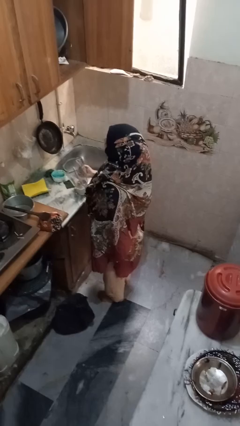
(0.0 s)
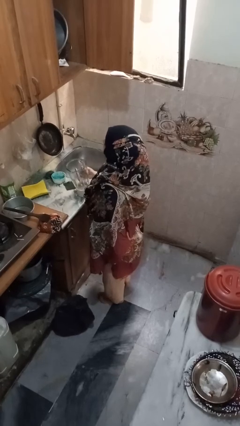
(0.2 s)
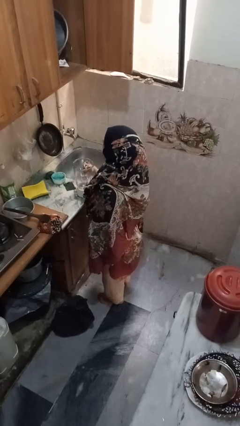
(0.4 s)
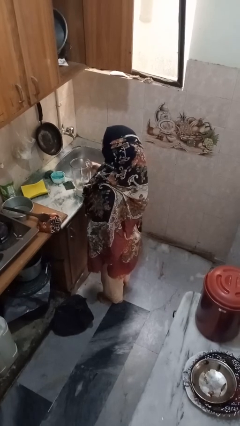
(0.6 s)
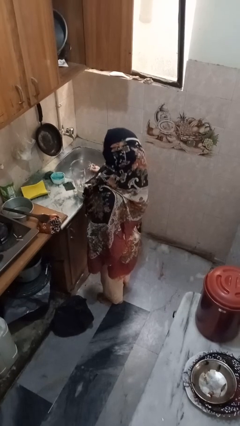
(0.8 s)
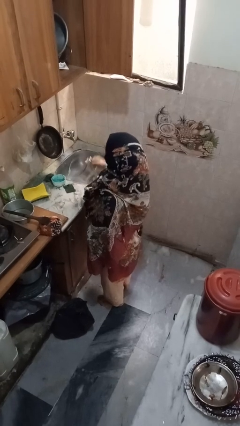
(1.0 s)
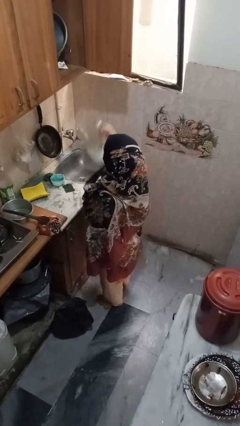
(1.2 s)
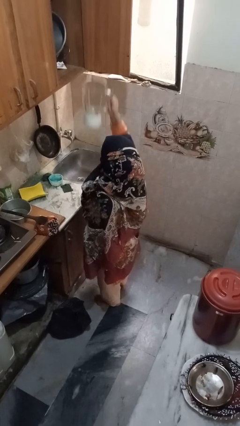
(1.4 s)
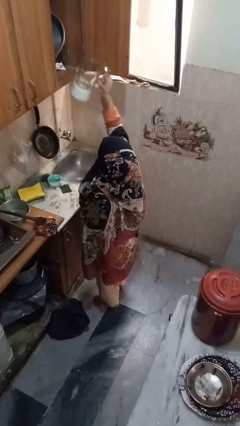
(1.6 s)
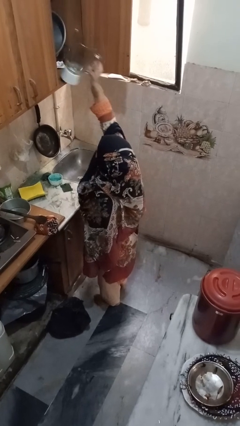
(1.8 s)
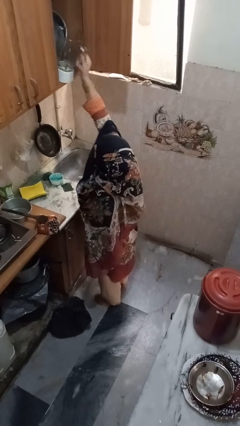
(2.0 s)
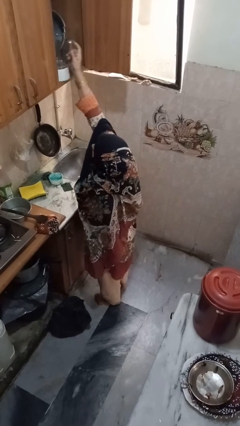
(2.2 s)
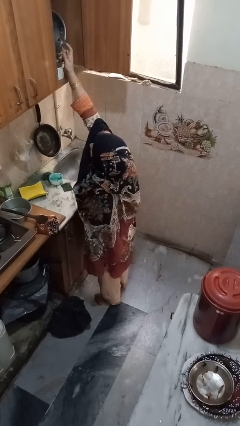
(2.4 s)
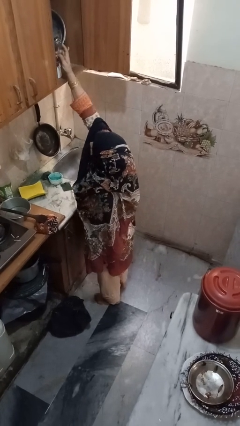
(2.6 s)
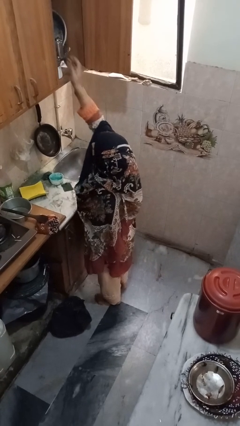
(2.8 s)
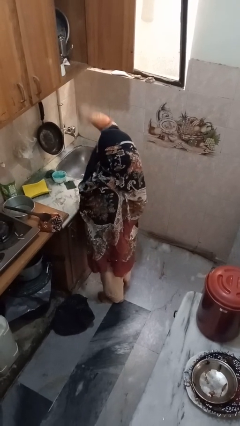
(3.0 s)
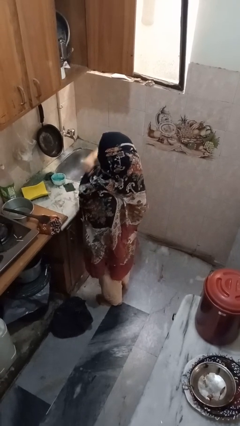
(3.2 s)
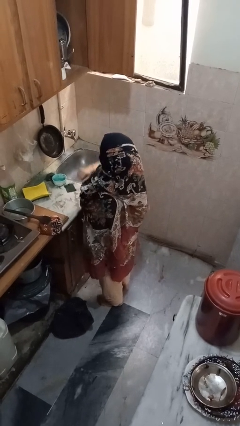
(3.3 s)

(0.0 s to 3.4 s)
person takes object from cabinet

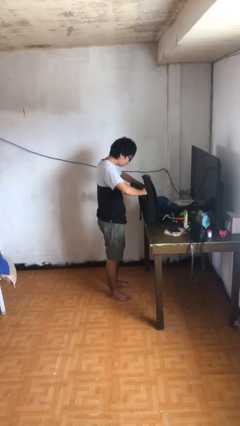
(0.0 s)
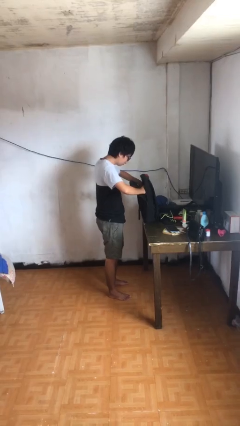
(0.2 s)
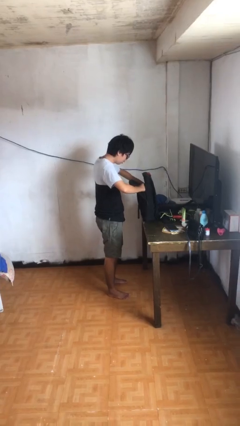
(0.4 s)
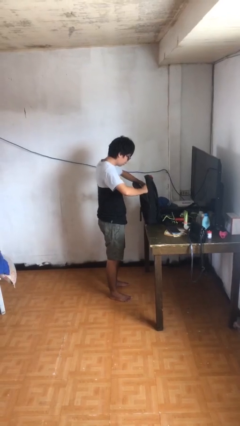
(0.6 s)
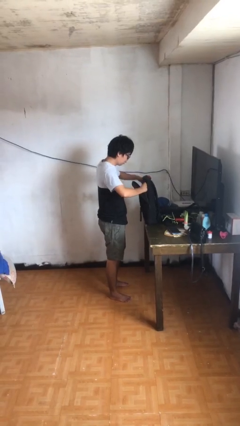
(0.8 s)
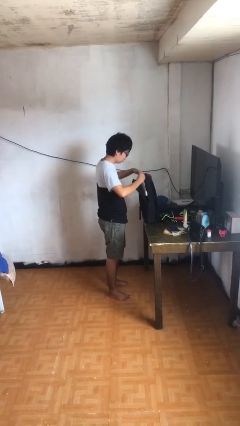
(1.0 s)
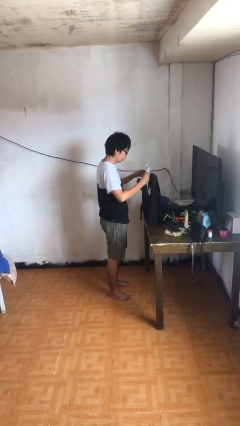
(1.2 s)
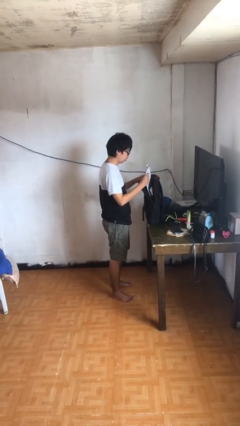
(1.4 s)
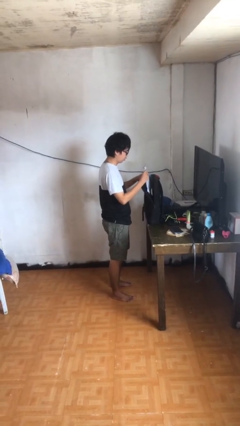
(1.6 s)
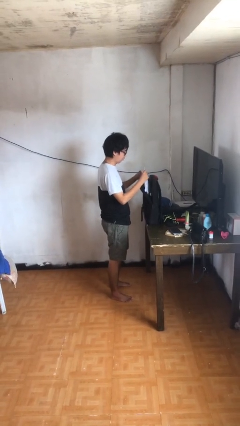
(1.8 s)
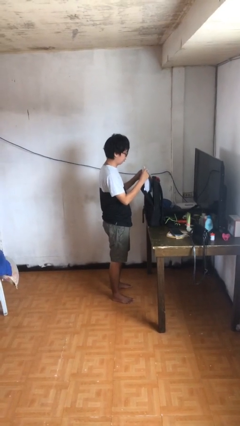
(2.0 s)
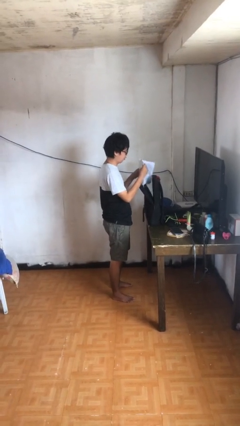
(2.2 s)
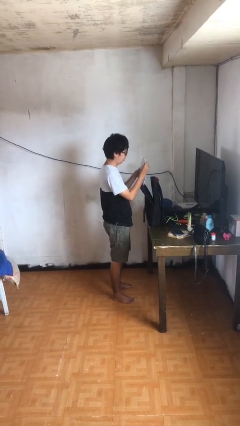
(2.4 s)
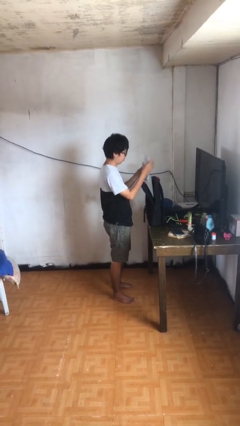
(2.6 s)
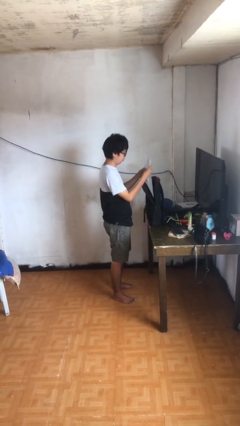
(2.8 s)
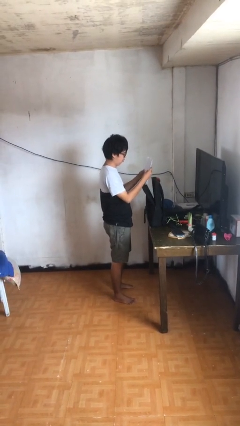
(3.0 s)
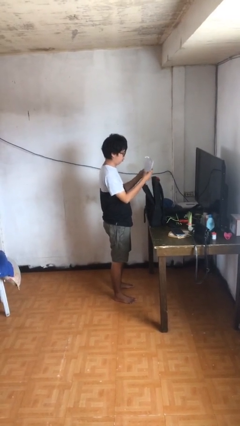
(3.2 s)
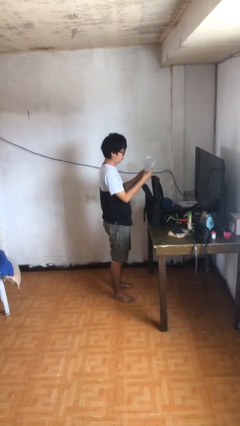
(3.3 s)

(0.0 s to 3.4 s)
person takes object from backpack

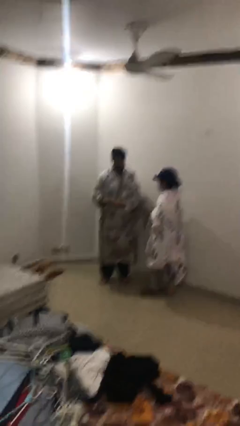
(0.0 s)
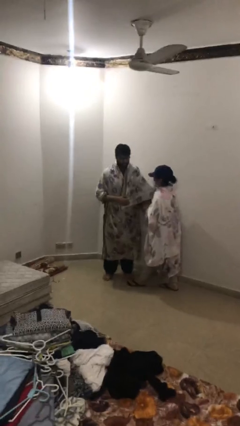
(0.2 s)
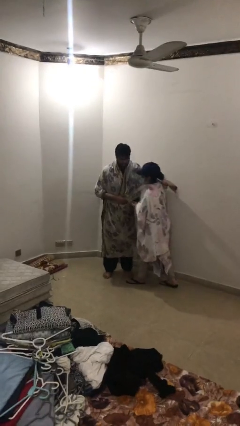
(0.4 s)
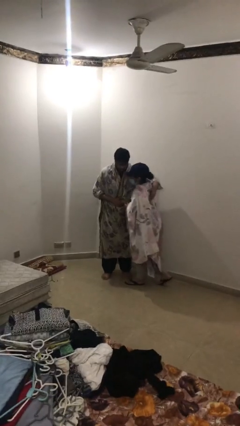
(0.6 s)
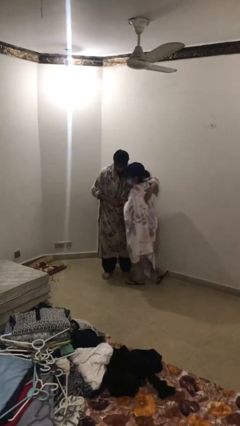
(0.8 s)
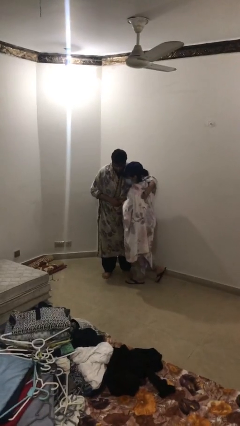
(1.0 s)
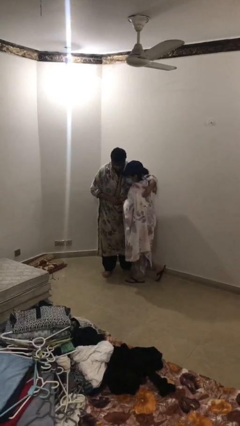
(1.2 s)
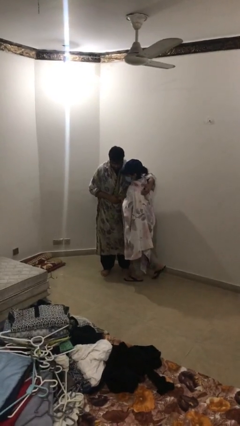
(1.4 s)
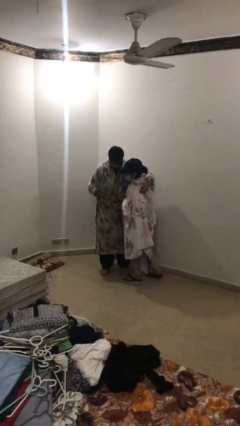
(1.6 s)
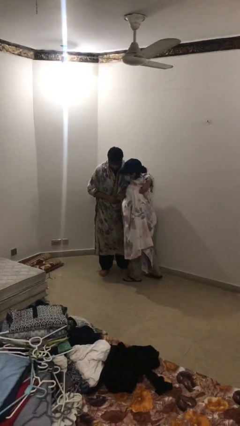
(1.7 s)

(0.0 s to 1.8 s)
person embraces person

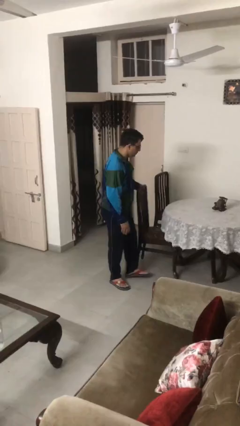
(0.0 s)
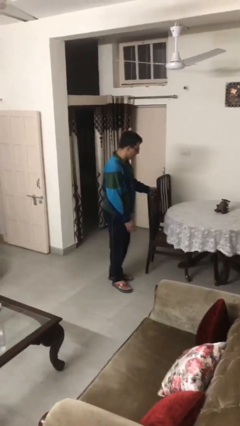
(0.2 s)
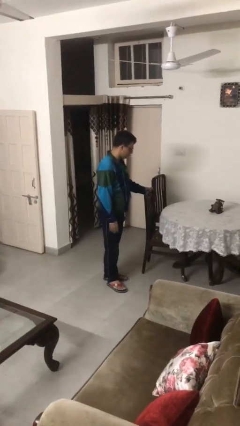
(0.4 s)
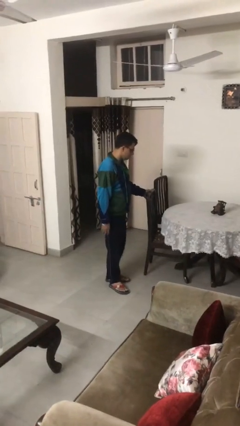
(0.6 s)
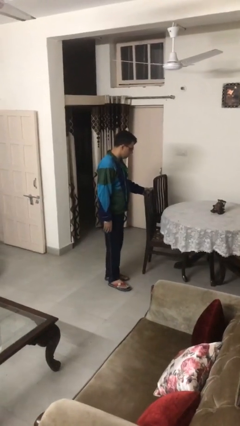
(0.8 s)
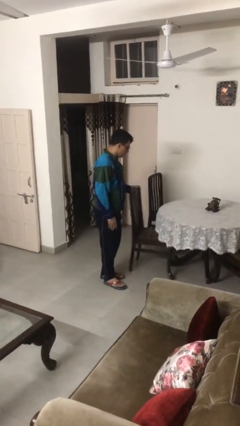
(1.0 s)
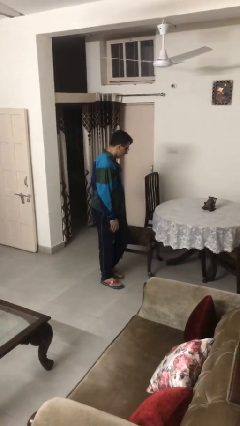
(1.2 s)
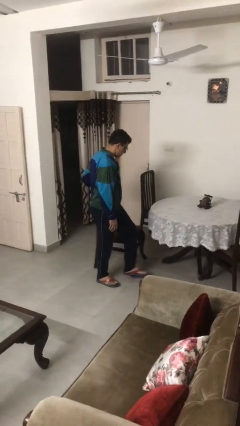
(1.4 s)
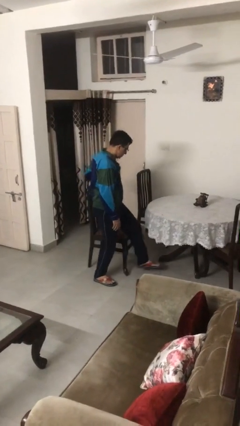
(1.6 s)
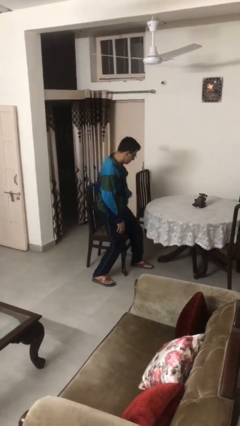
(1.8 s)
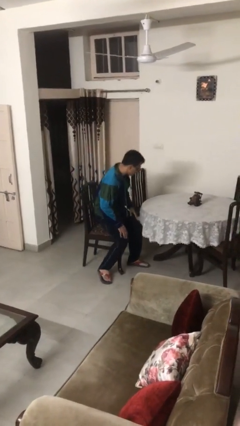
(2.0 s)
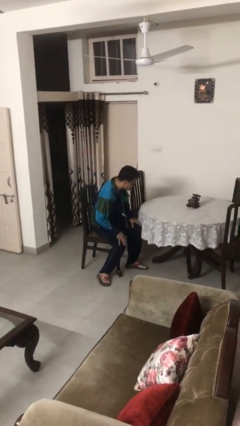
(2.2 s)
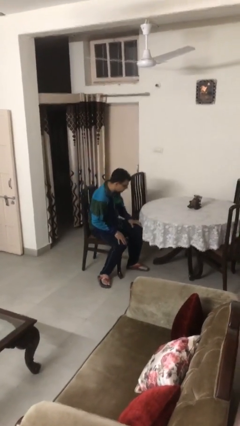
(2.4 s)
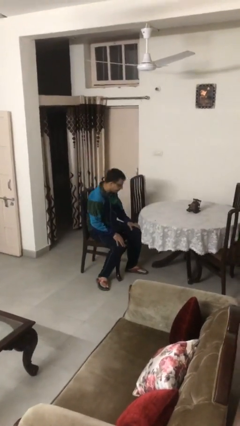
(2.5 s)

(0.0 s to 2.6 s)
person sits down

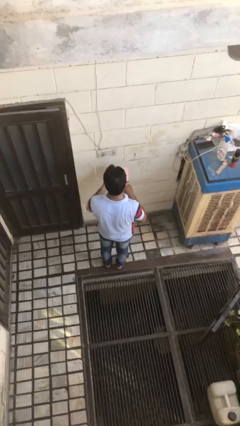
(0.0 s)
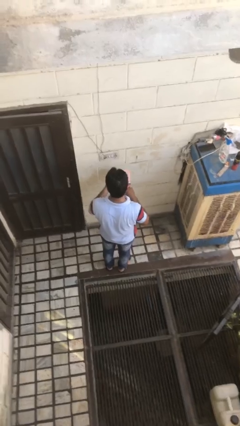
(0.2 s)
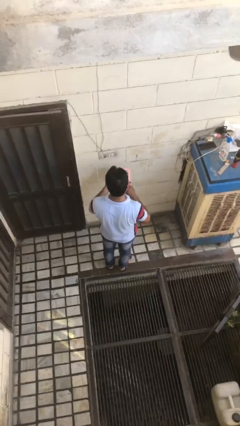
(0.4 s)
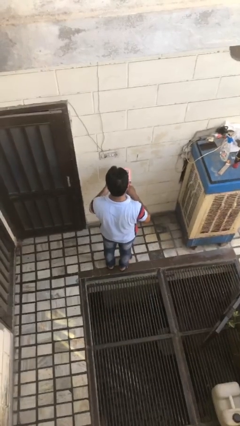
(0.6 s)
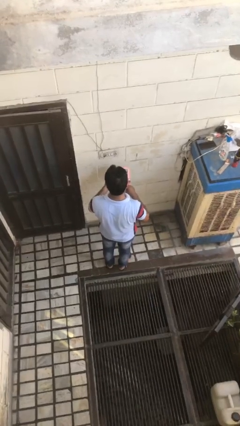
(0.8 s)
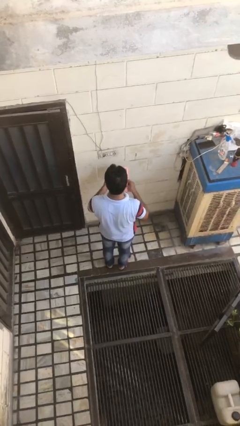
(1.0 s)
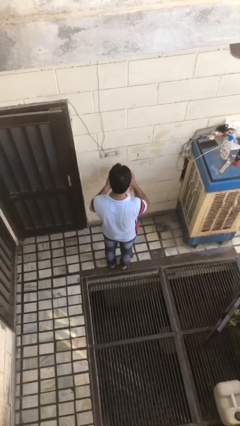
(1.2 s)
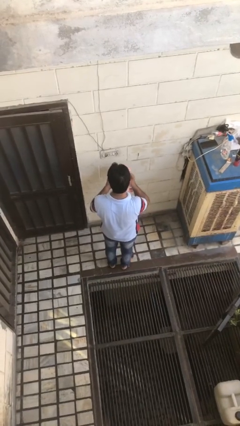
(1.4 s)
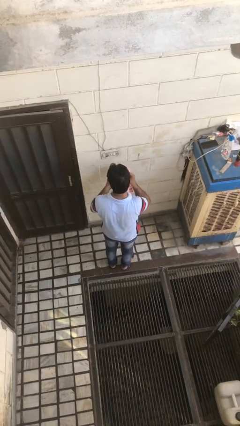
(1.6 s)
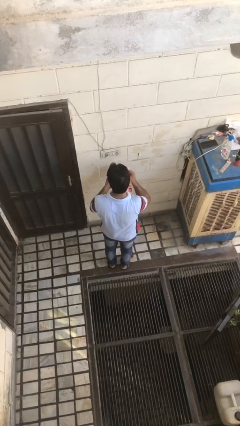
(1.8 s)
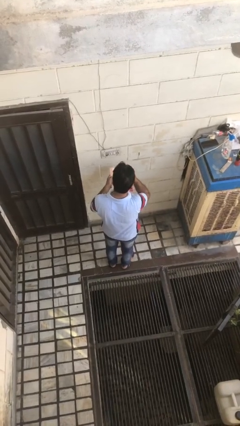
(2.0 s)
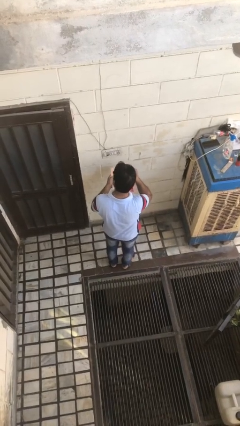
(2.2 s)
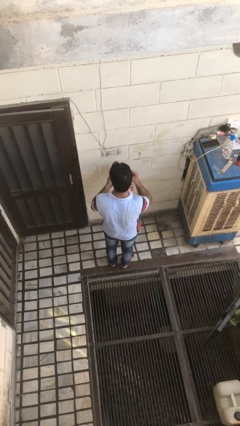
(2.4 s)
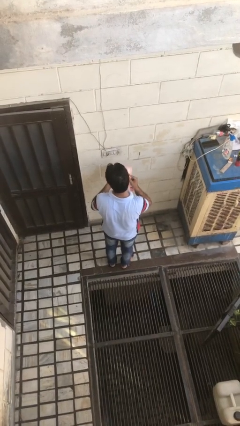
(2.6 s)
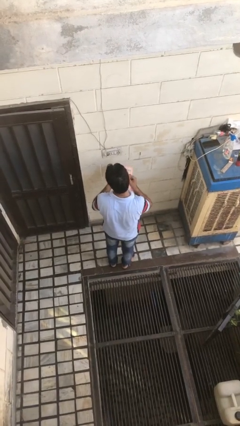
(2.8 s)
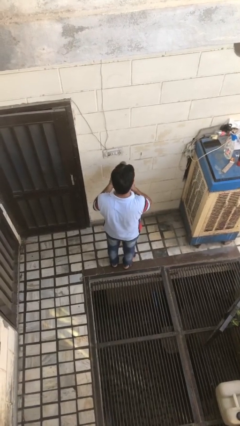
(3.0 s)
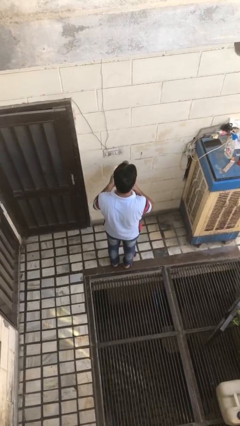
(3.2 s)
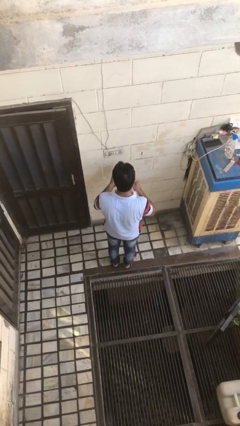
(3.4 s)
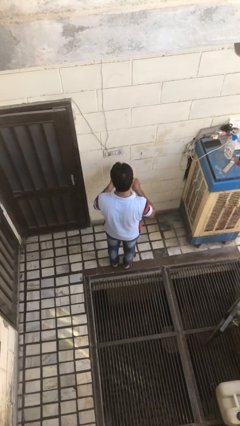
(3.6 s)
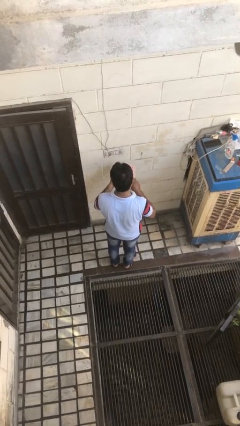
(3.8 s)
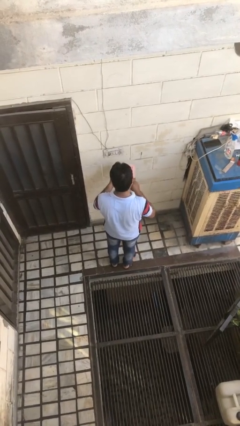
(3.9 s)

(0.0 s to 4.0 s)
person applies foundation makeup

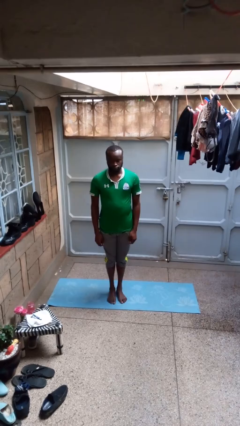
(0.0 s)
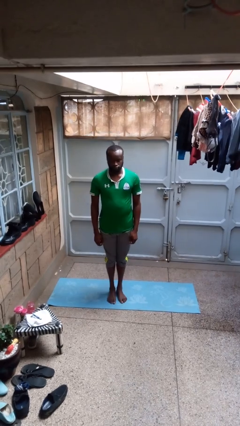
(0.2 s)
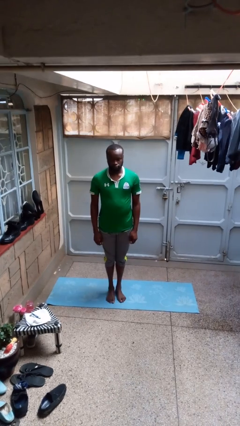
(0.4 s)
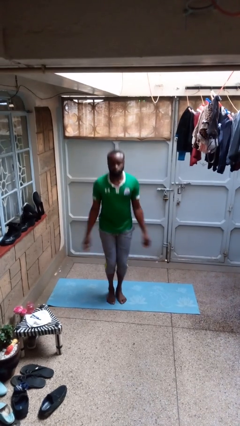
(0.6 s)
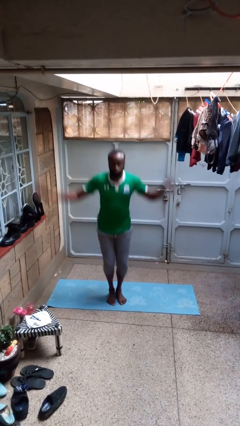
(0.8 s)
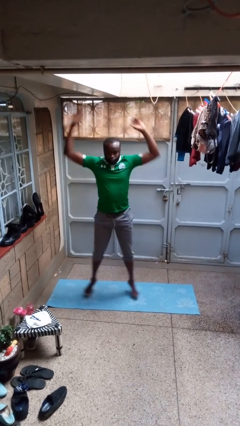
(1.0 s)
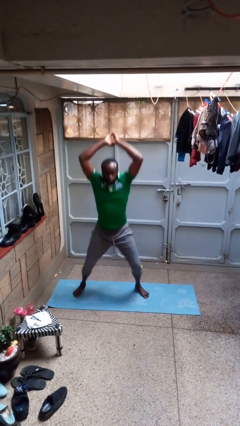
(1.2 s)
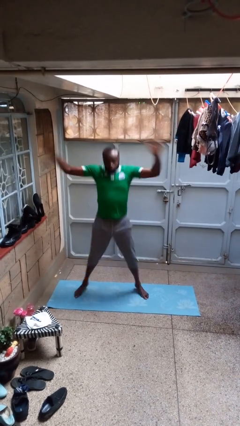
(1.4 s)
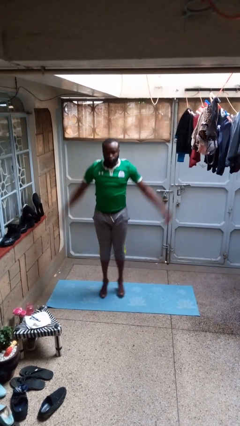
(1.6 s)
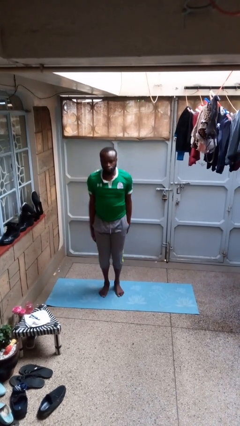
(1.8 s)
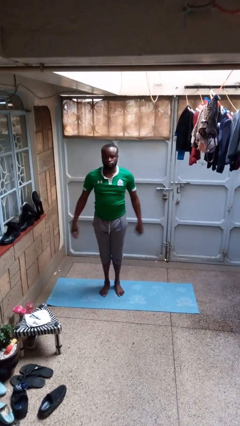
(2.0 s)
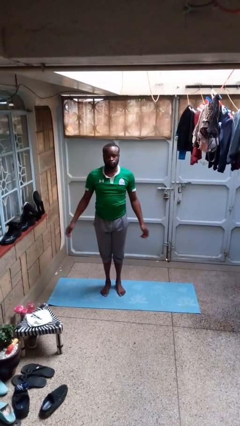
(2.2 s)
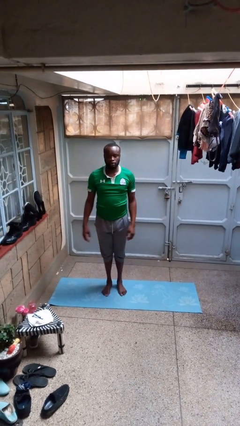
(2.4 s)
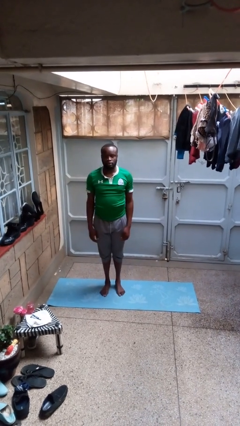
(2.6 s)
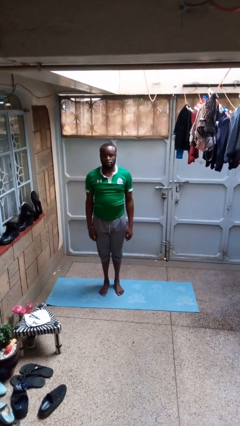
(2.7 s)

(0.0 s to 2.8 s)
person exercises with jumping jacks
